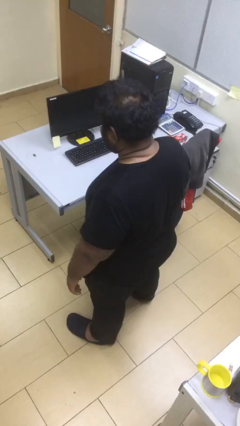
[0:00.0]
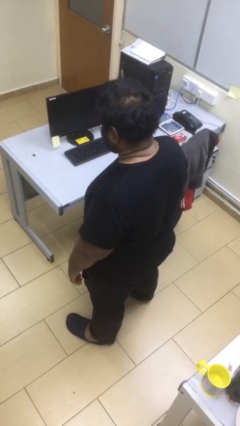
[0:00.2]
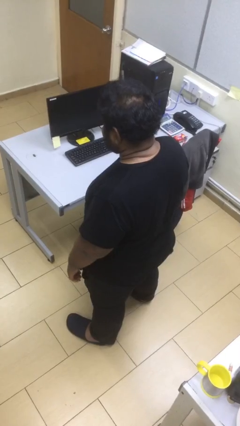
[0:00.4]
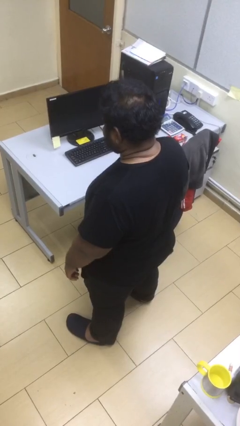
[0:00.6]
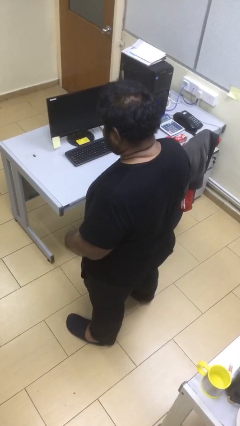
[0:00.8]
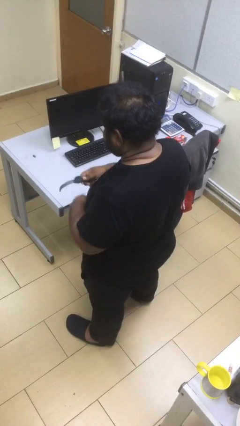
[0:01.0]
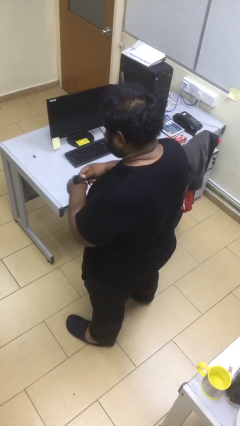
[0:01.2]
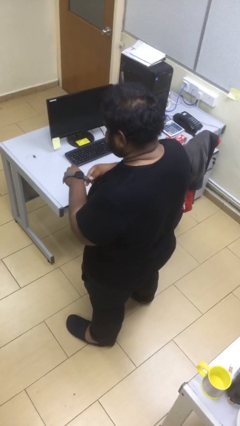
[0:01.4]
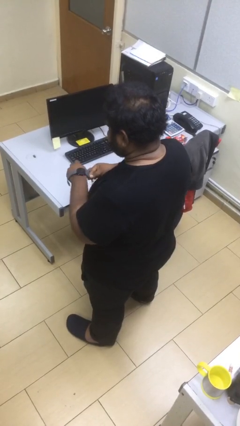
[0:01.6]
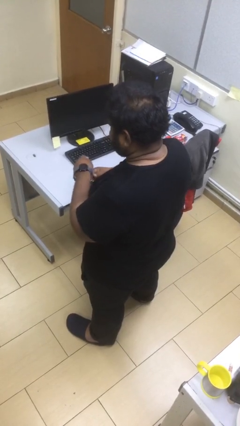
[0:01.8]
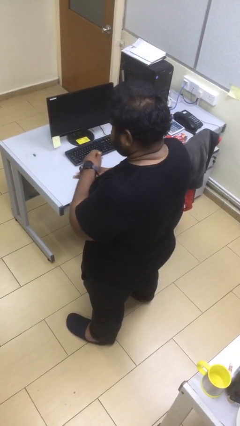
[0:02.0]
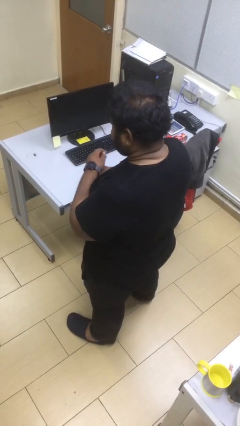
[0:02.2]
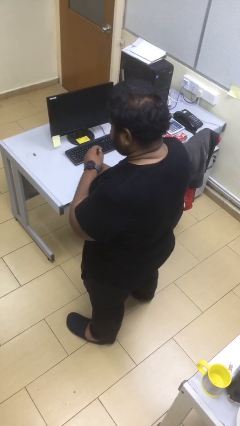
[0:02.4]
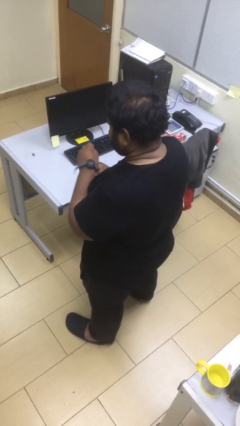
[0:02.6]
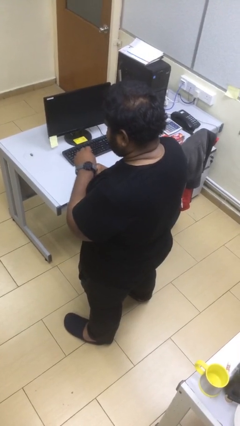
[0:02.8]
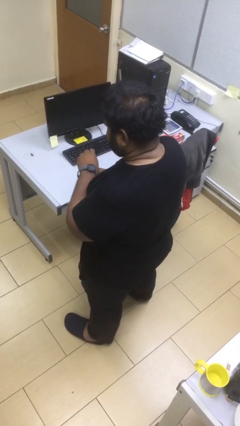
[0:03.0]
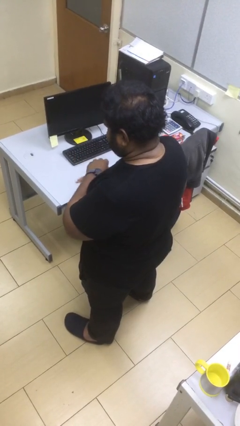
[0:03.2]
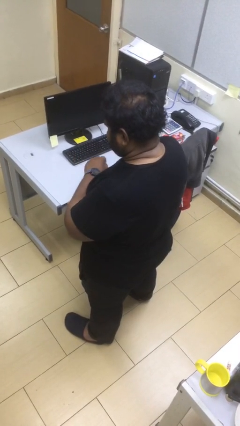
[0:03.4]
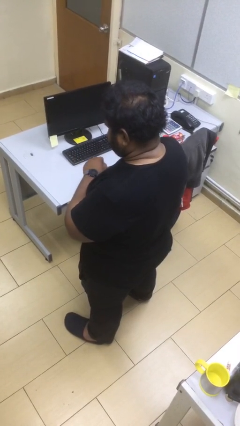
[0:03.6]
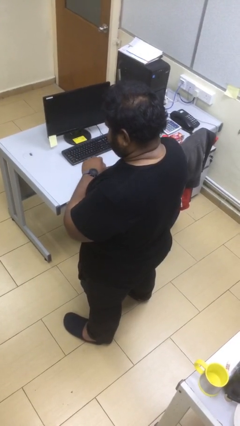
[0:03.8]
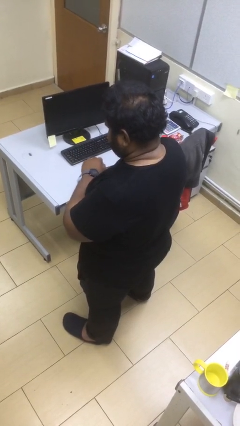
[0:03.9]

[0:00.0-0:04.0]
person puts on wristwatch

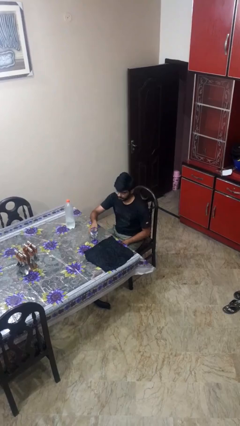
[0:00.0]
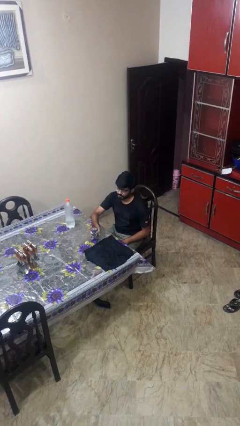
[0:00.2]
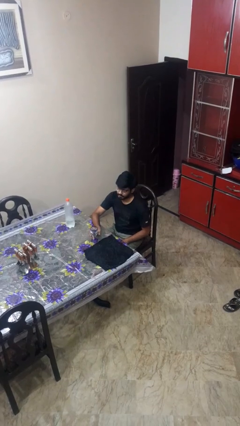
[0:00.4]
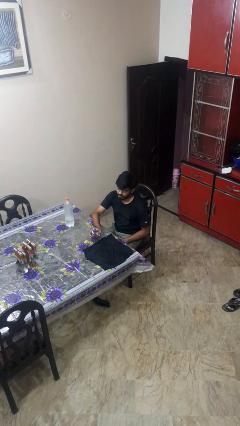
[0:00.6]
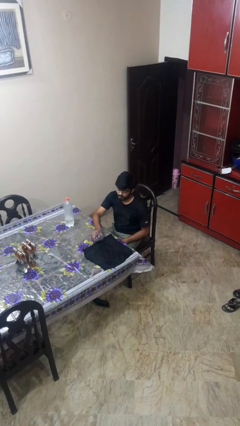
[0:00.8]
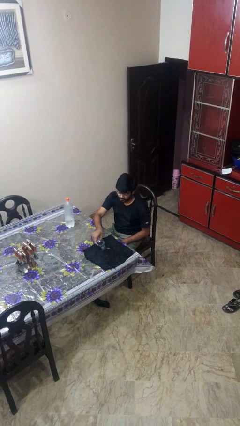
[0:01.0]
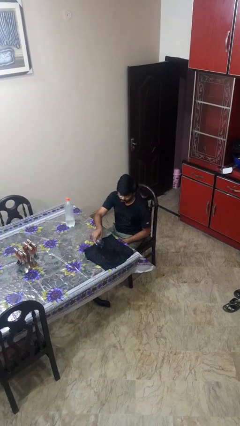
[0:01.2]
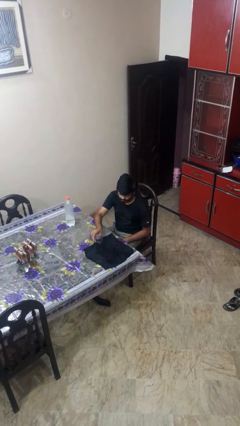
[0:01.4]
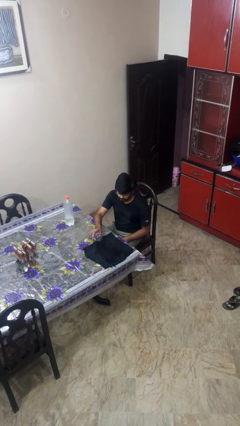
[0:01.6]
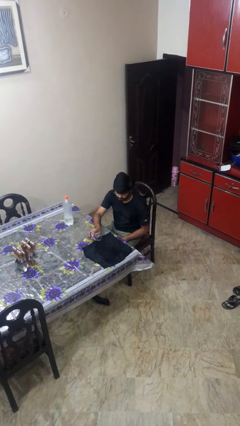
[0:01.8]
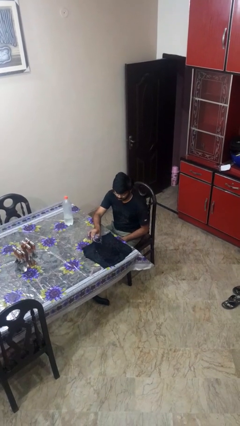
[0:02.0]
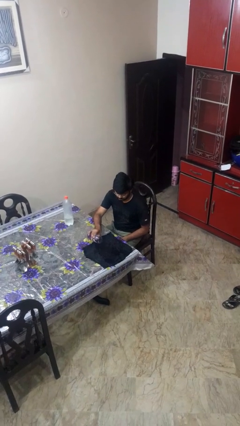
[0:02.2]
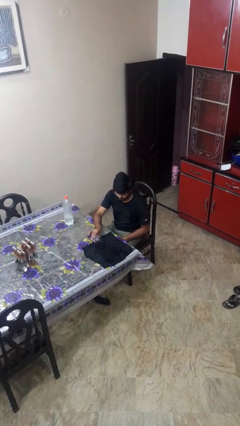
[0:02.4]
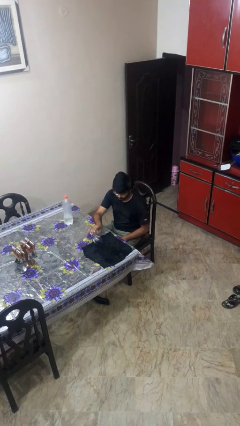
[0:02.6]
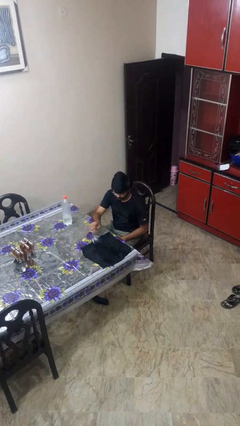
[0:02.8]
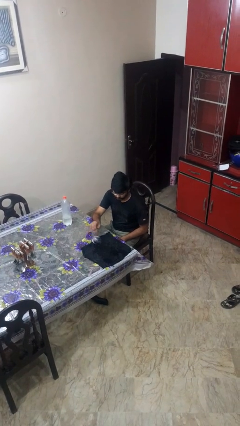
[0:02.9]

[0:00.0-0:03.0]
person clips fingernails

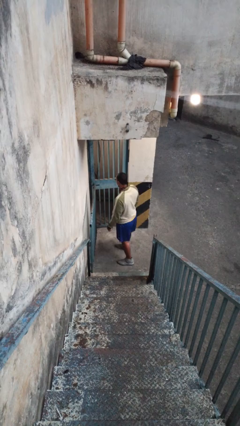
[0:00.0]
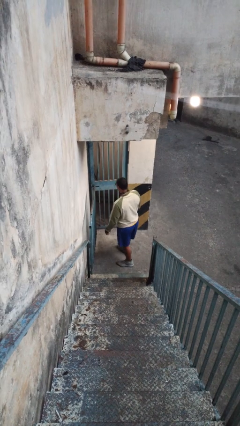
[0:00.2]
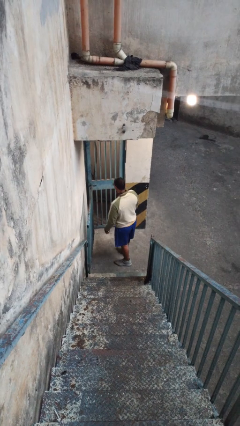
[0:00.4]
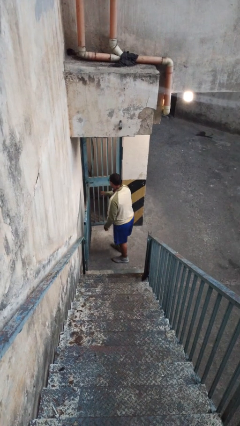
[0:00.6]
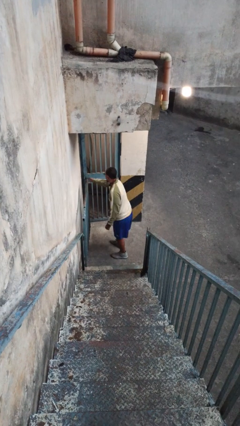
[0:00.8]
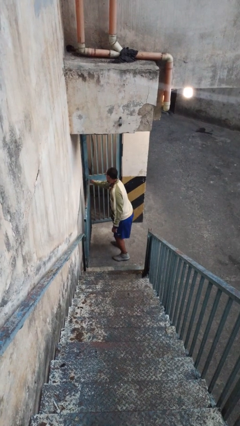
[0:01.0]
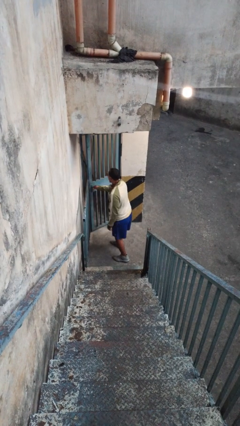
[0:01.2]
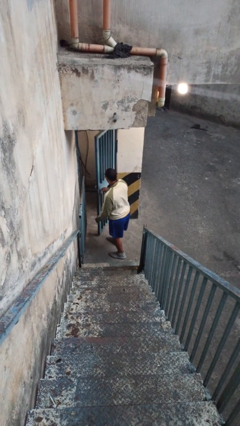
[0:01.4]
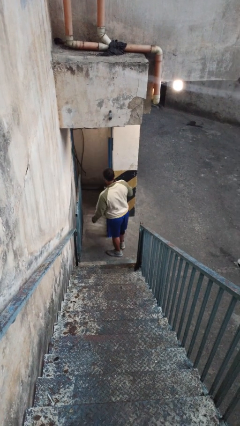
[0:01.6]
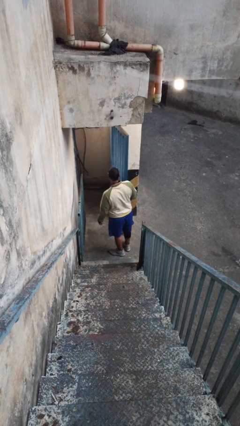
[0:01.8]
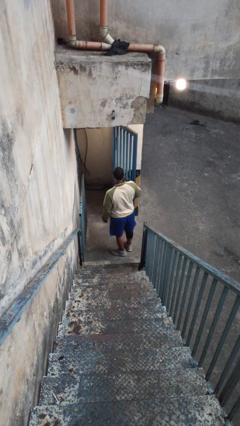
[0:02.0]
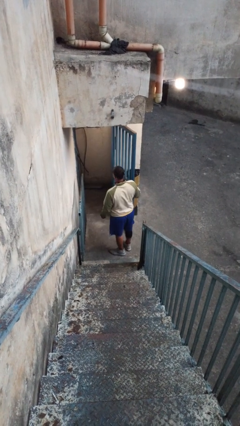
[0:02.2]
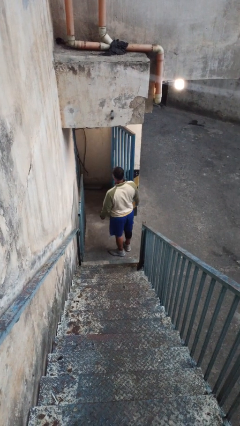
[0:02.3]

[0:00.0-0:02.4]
person opens facility door

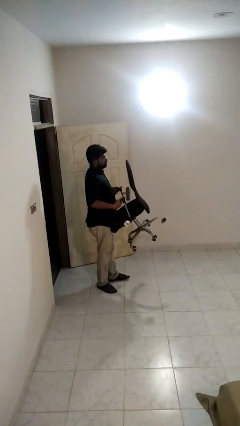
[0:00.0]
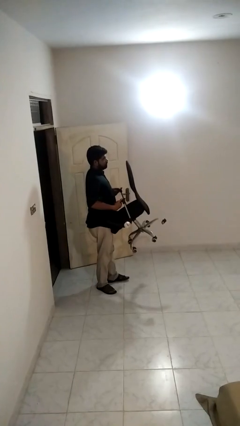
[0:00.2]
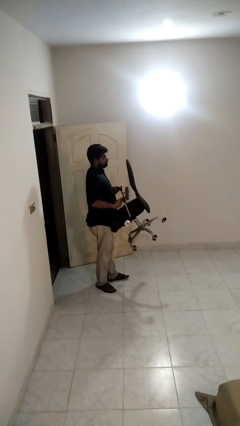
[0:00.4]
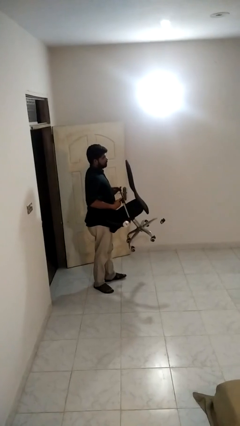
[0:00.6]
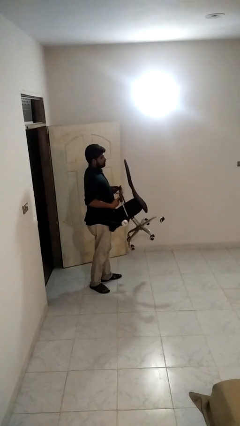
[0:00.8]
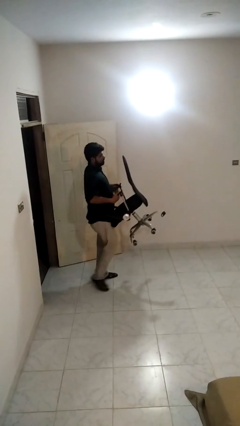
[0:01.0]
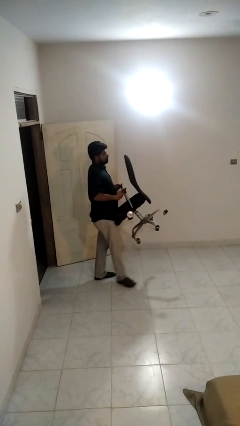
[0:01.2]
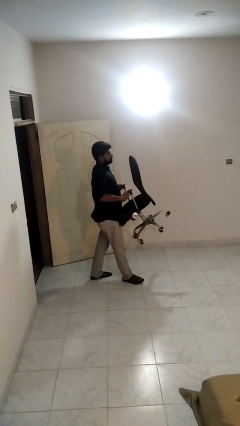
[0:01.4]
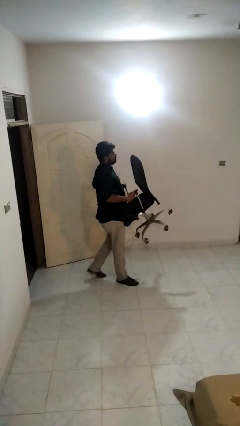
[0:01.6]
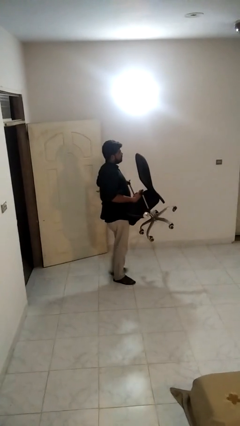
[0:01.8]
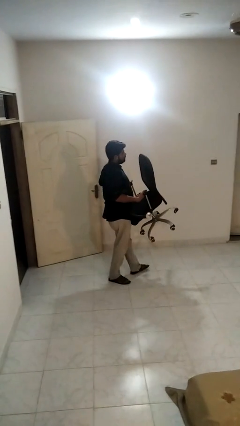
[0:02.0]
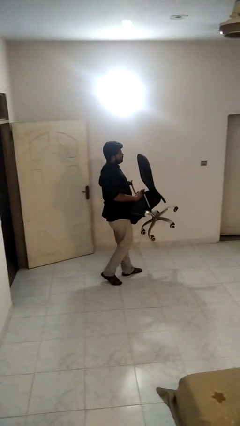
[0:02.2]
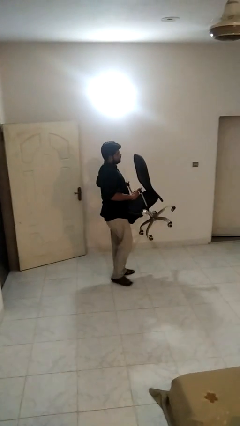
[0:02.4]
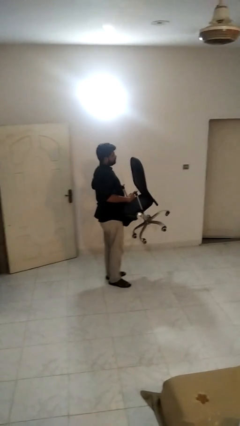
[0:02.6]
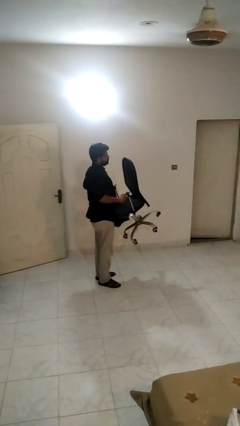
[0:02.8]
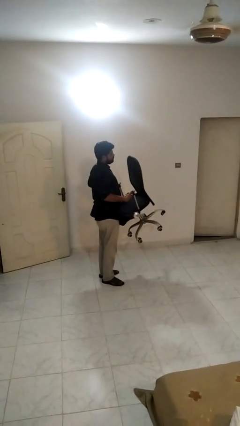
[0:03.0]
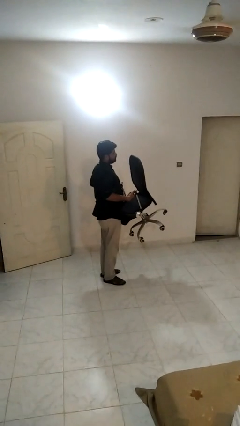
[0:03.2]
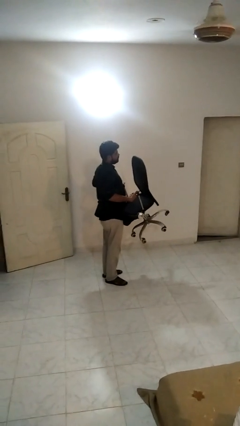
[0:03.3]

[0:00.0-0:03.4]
person carries furniture

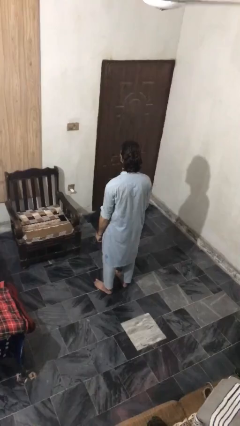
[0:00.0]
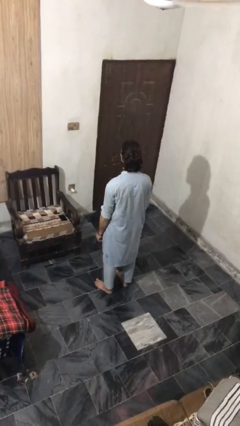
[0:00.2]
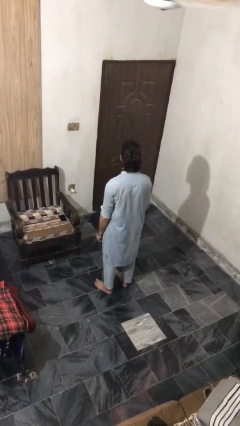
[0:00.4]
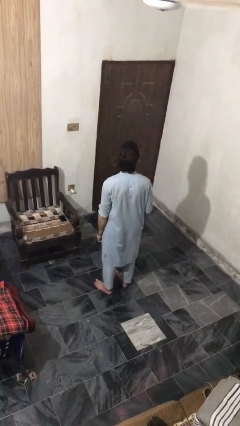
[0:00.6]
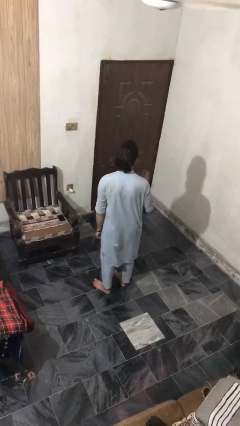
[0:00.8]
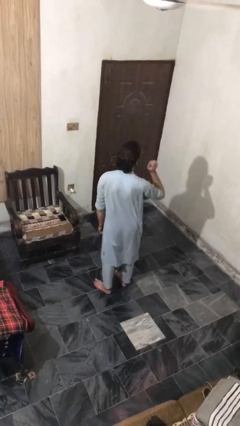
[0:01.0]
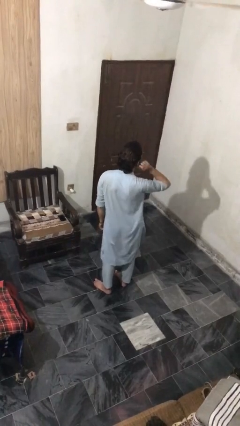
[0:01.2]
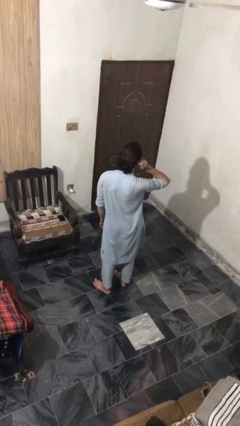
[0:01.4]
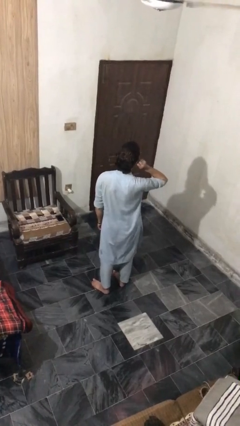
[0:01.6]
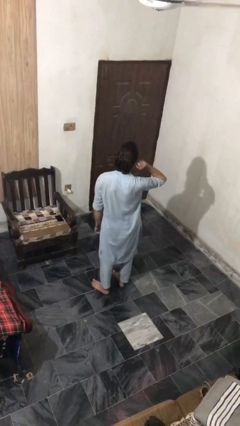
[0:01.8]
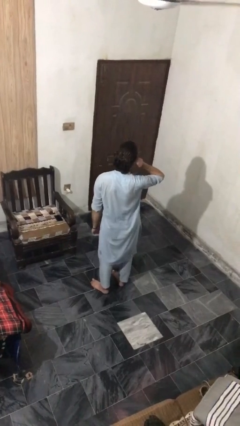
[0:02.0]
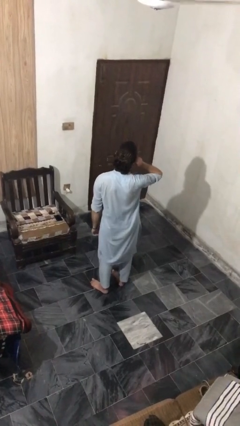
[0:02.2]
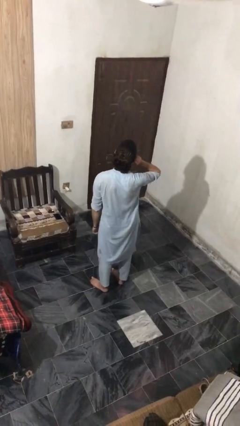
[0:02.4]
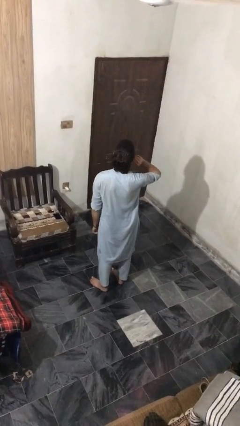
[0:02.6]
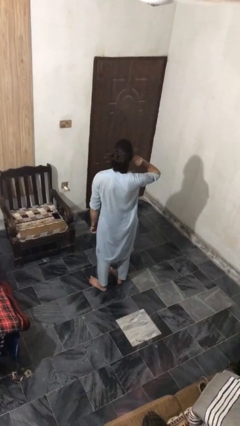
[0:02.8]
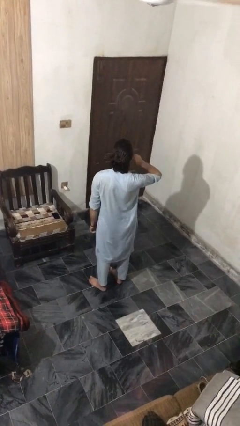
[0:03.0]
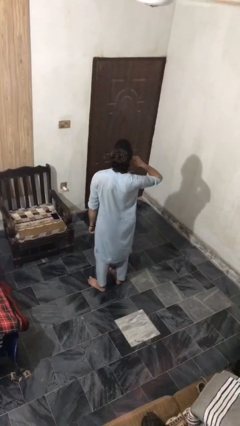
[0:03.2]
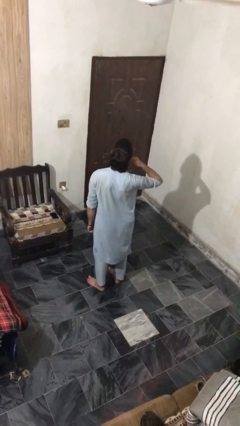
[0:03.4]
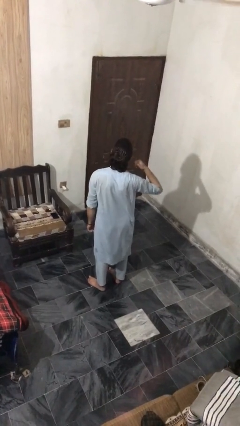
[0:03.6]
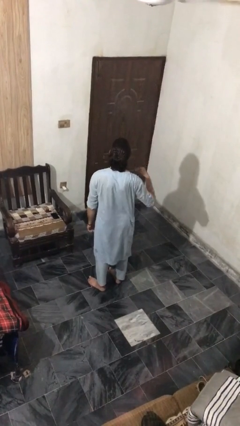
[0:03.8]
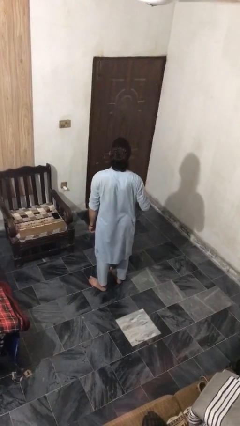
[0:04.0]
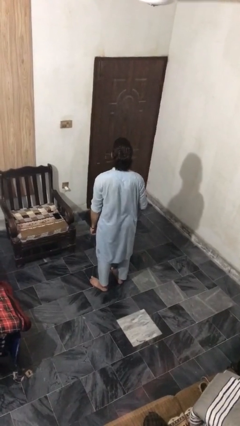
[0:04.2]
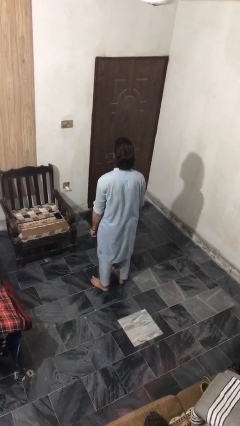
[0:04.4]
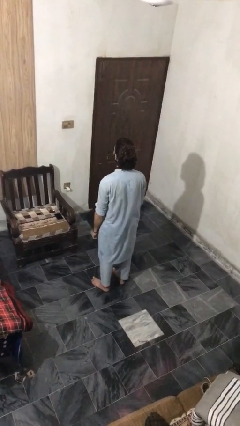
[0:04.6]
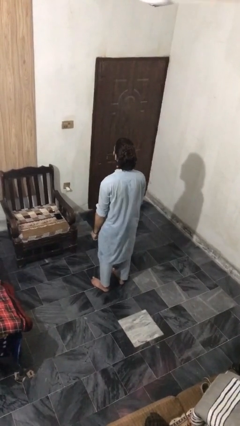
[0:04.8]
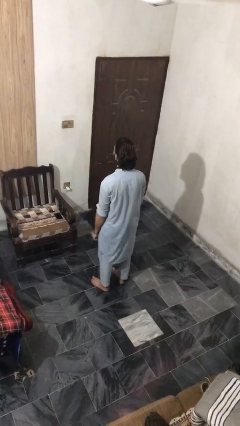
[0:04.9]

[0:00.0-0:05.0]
person touches earlobe
